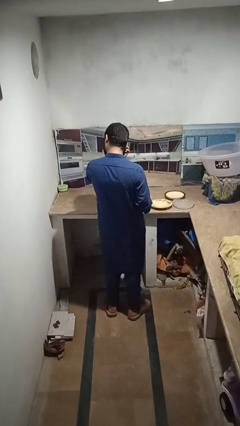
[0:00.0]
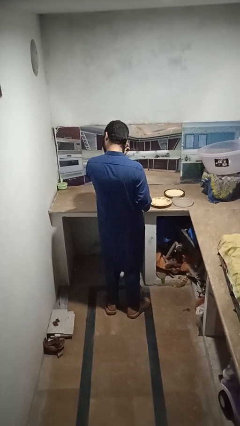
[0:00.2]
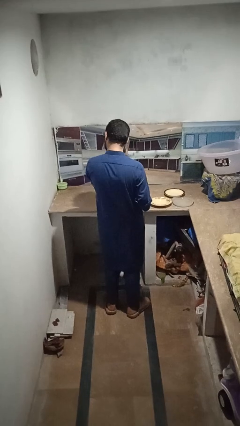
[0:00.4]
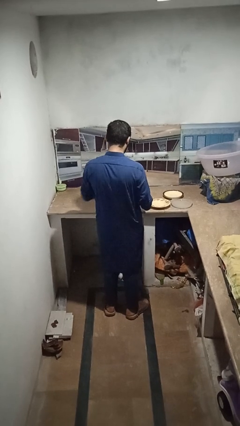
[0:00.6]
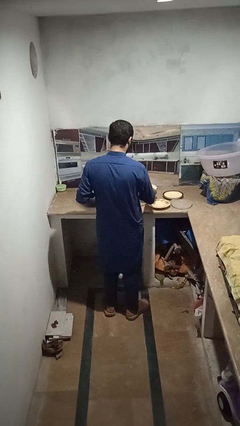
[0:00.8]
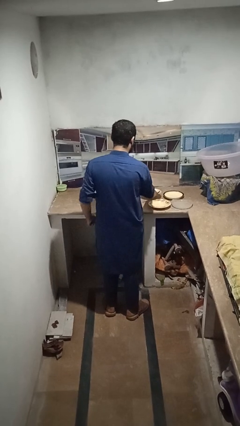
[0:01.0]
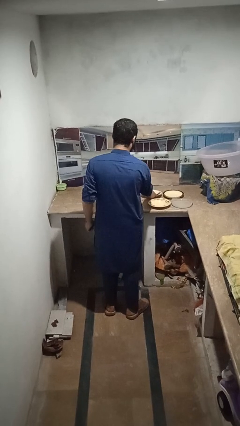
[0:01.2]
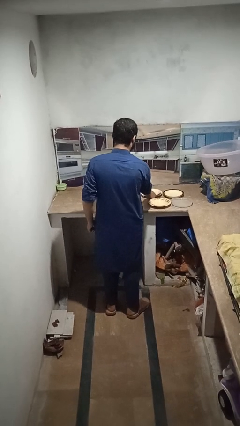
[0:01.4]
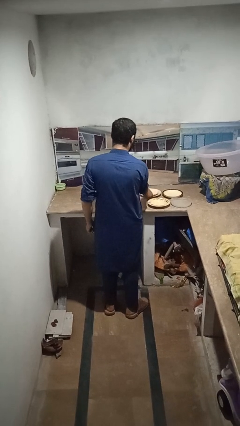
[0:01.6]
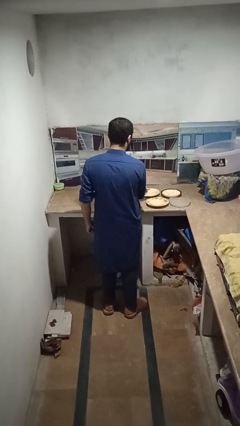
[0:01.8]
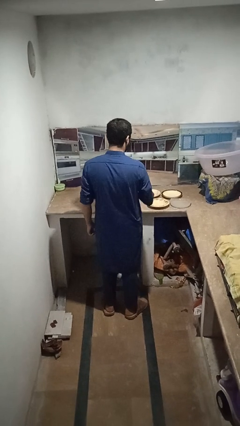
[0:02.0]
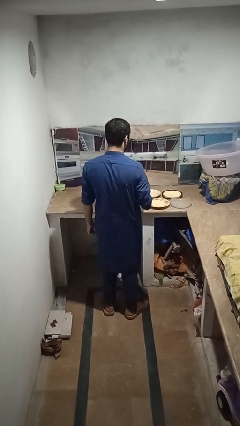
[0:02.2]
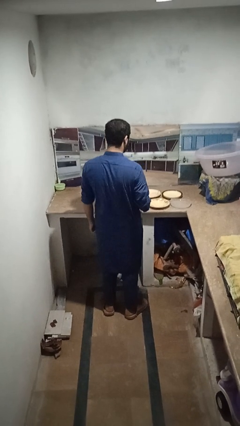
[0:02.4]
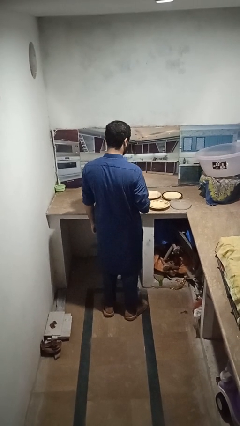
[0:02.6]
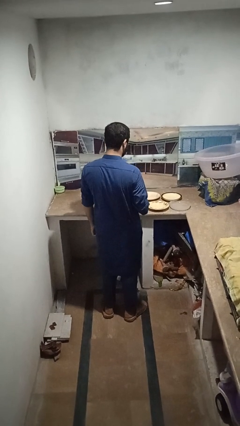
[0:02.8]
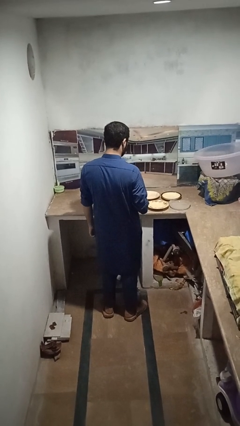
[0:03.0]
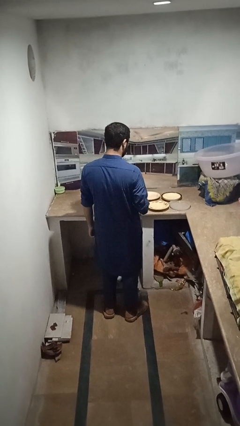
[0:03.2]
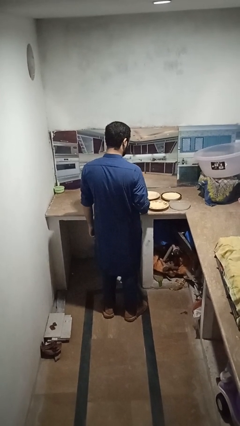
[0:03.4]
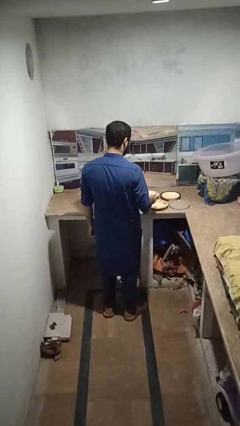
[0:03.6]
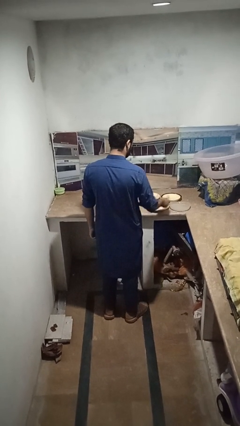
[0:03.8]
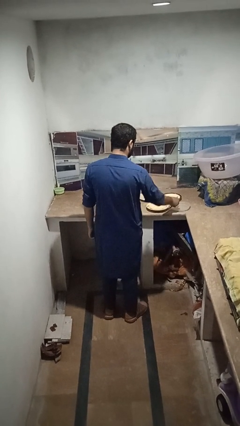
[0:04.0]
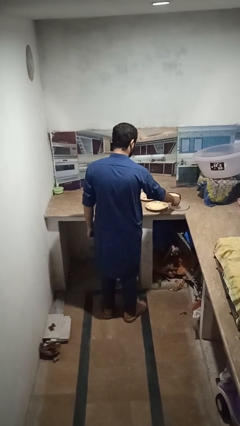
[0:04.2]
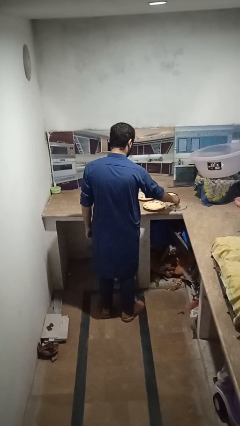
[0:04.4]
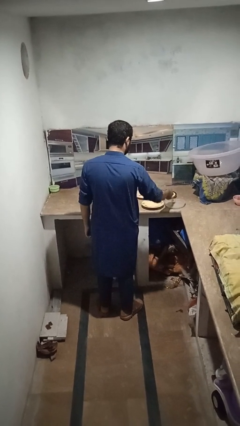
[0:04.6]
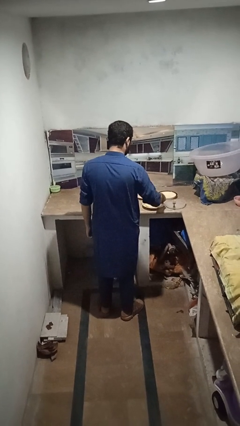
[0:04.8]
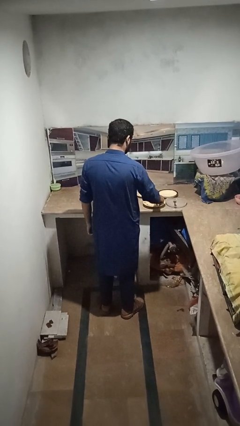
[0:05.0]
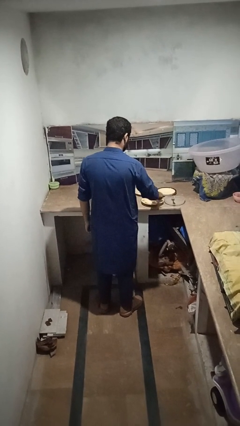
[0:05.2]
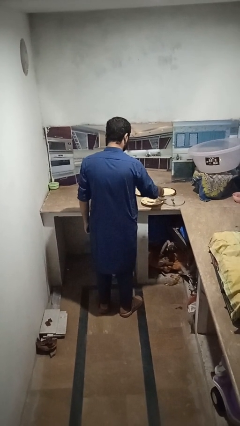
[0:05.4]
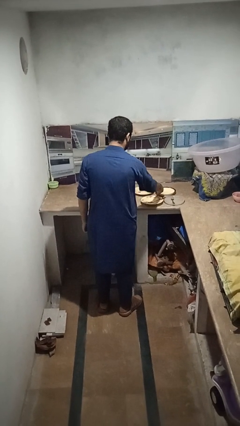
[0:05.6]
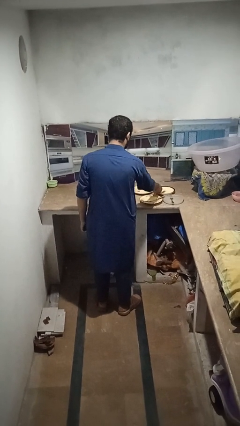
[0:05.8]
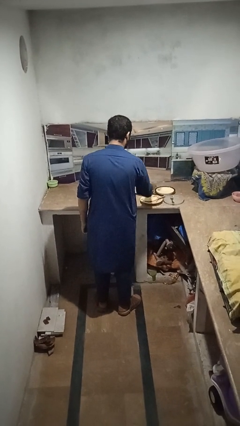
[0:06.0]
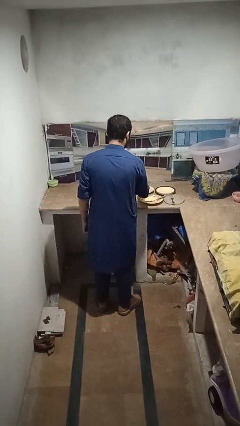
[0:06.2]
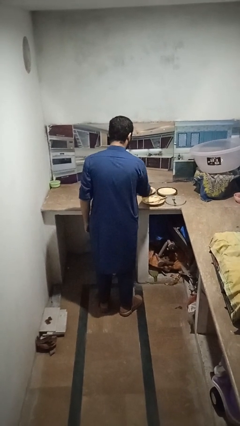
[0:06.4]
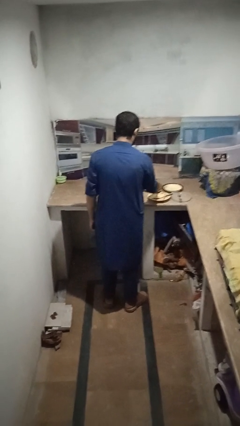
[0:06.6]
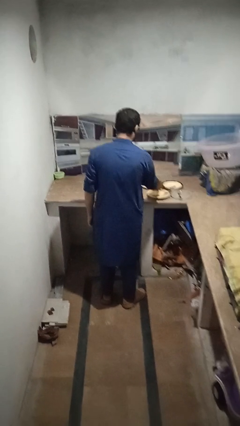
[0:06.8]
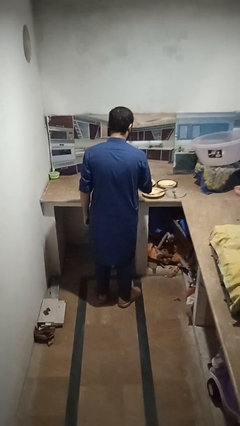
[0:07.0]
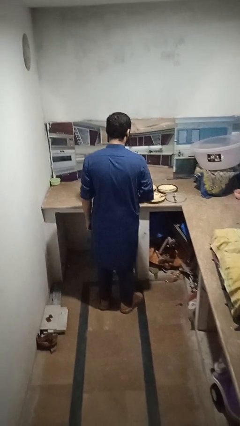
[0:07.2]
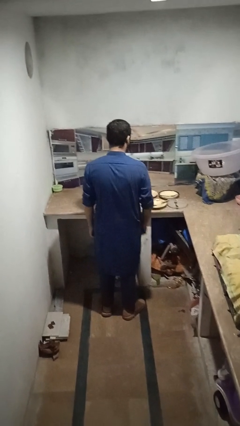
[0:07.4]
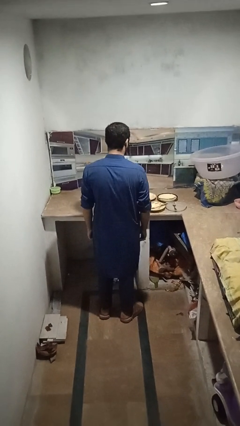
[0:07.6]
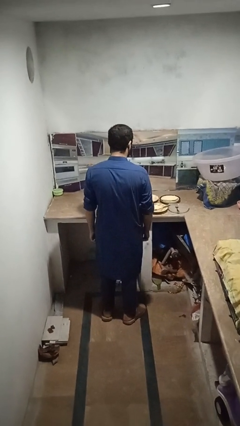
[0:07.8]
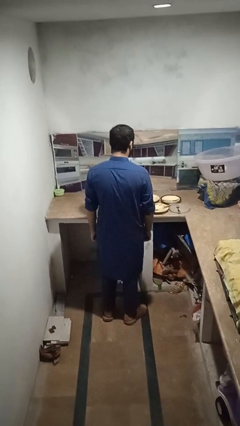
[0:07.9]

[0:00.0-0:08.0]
person sets table

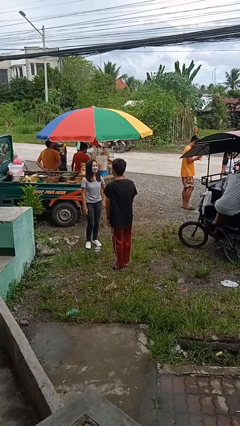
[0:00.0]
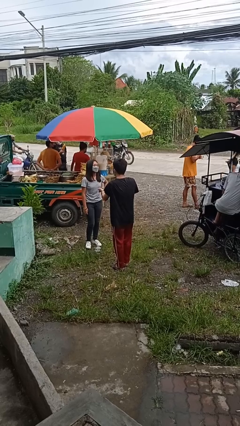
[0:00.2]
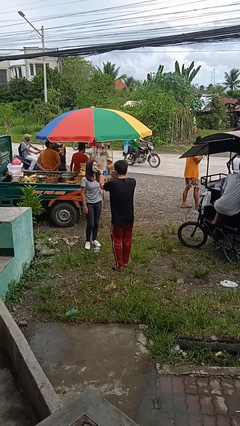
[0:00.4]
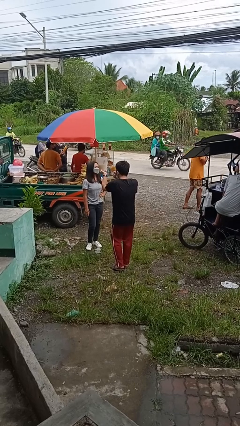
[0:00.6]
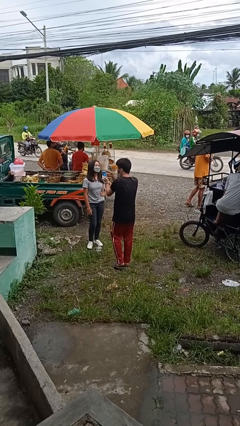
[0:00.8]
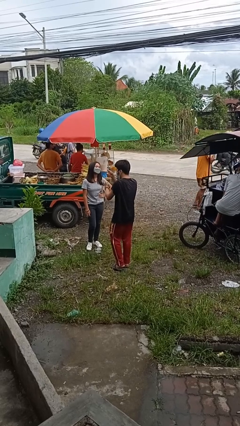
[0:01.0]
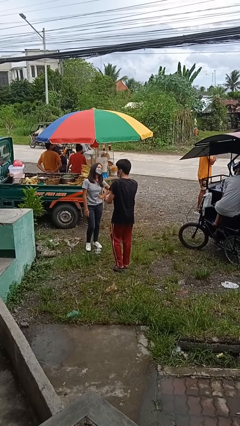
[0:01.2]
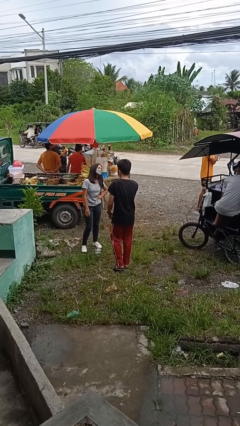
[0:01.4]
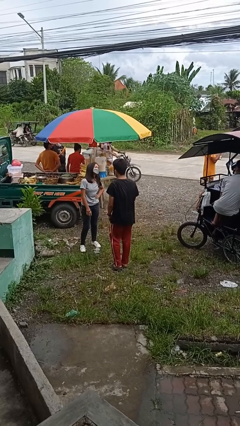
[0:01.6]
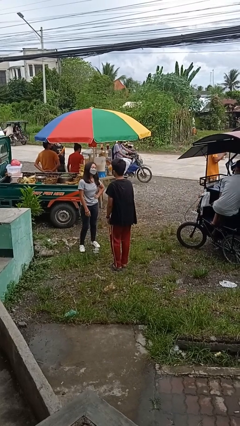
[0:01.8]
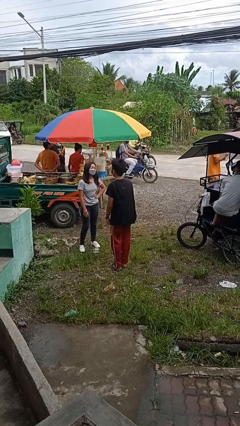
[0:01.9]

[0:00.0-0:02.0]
person talks to person

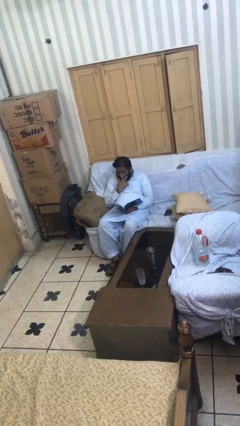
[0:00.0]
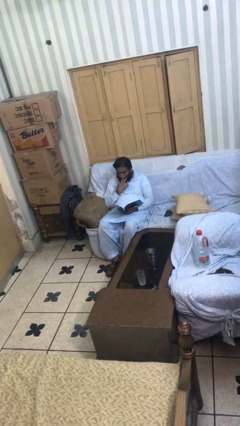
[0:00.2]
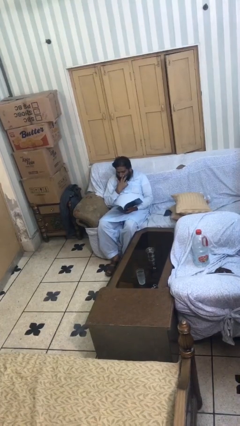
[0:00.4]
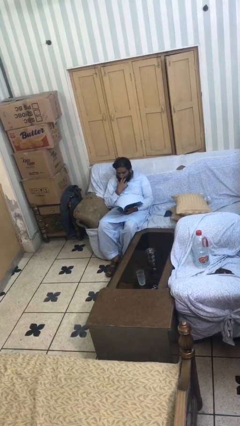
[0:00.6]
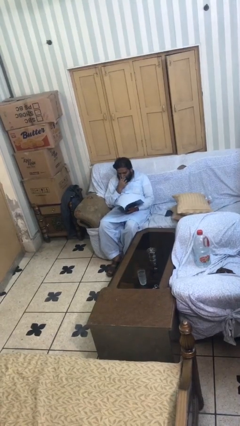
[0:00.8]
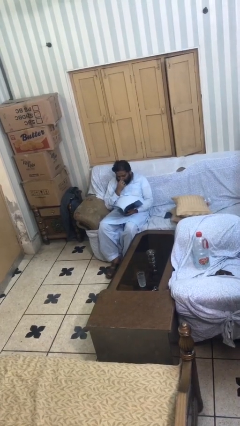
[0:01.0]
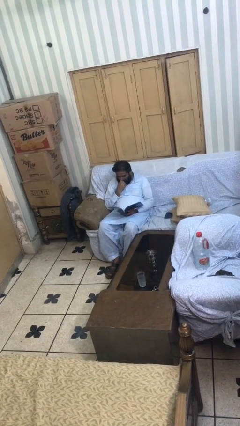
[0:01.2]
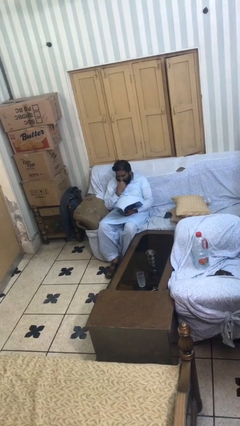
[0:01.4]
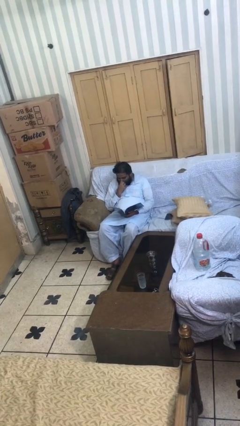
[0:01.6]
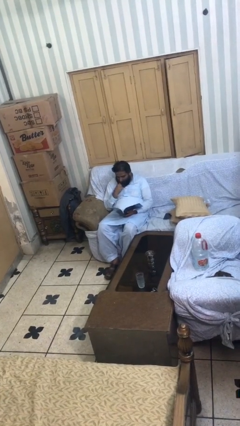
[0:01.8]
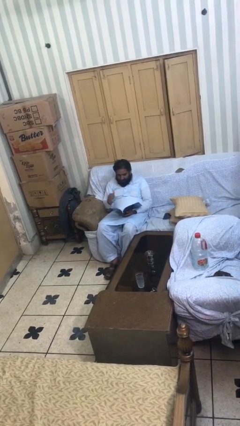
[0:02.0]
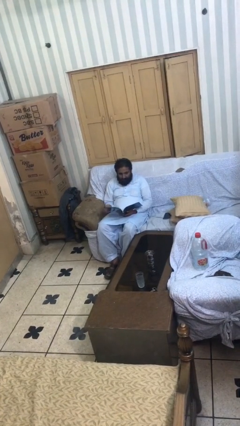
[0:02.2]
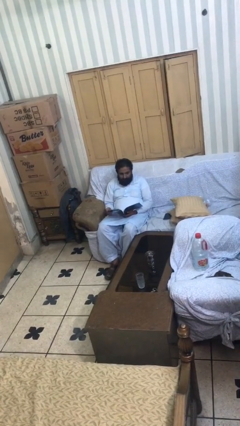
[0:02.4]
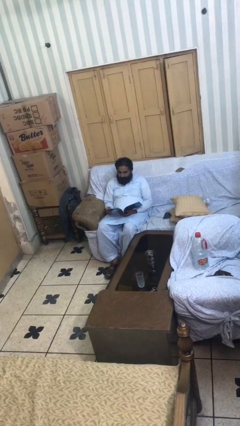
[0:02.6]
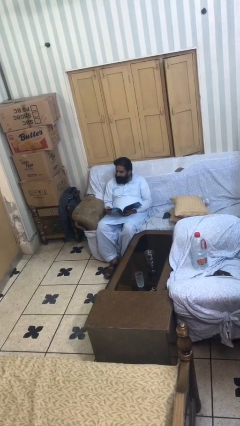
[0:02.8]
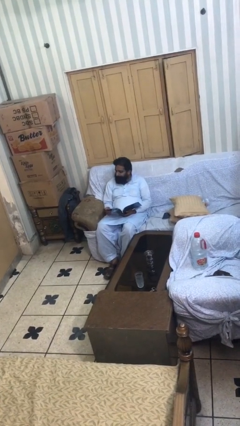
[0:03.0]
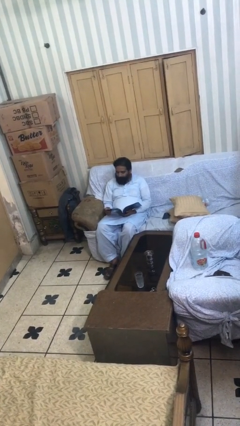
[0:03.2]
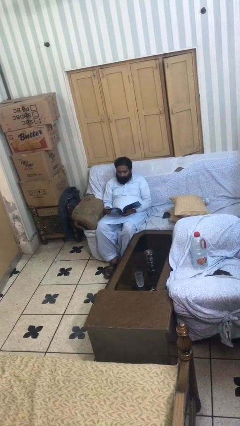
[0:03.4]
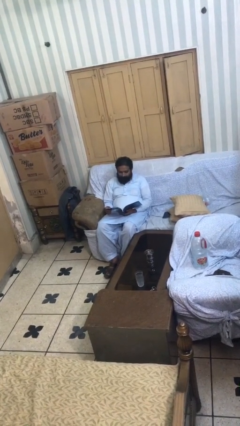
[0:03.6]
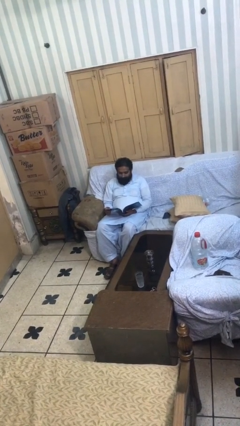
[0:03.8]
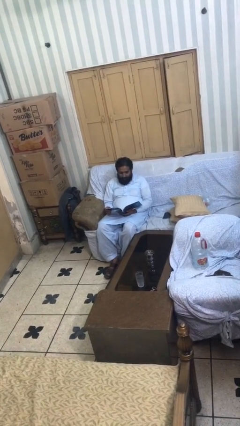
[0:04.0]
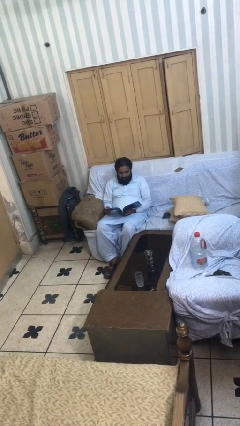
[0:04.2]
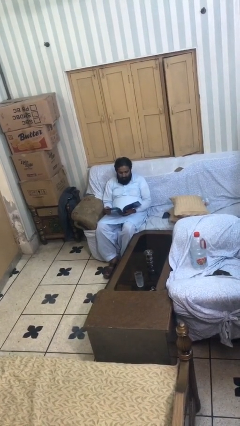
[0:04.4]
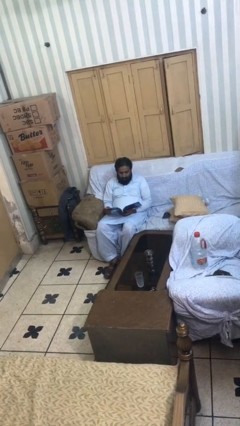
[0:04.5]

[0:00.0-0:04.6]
person reads document

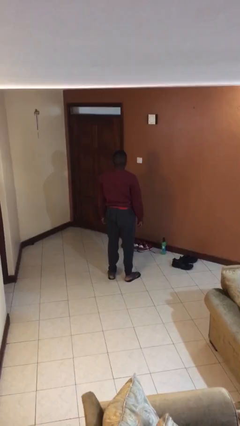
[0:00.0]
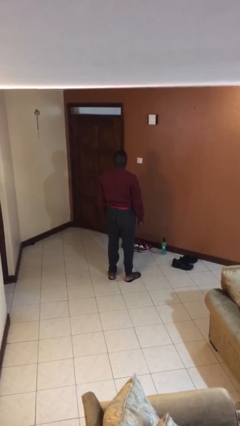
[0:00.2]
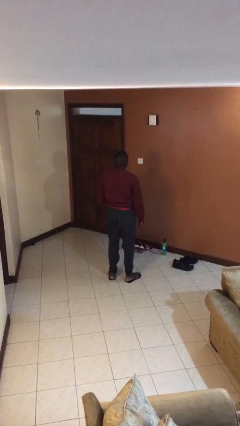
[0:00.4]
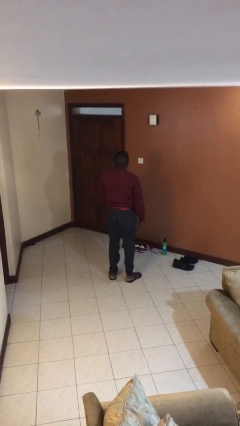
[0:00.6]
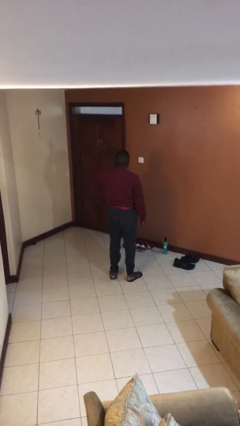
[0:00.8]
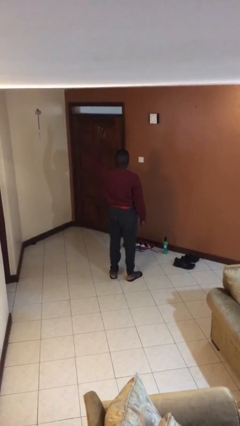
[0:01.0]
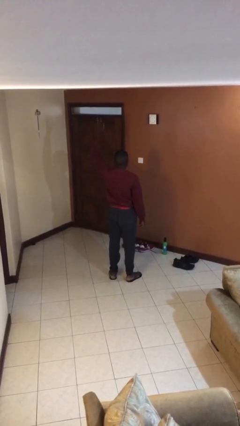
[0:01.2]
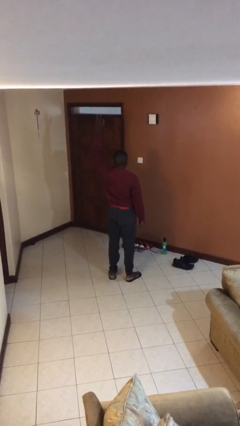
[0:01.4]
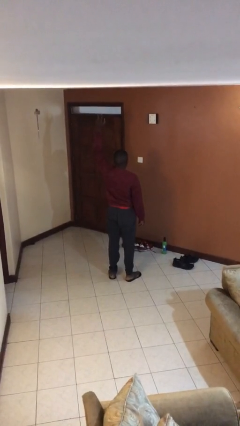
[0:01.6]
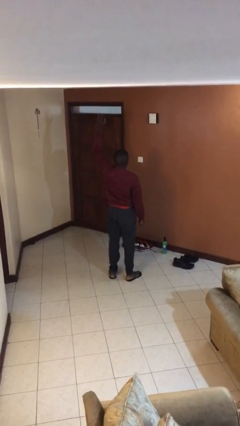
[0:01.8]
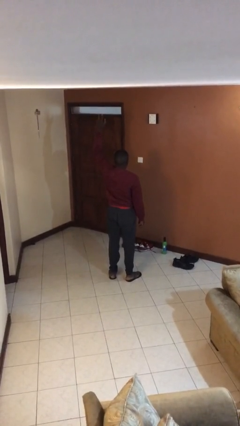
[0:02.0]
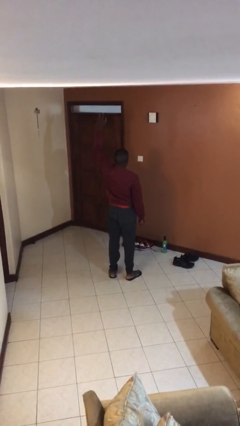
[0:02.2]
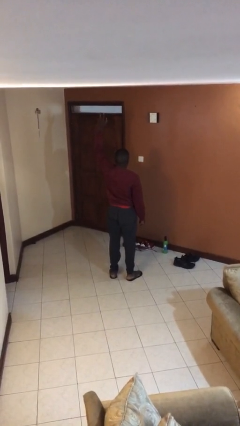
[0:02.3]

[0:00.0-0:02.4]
person gestures raise hand

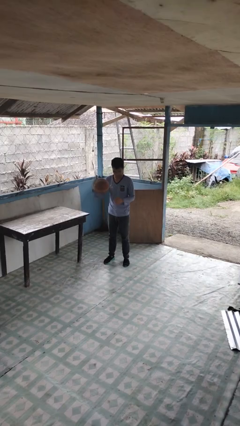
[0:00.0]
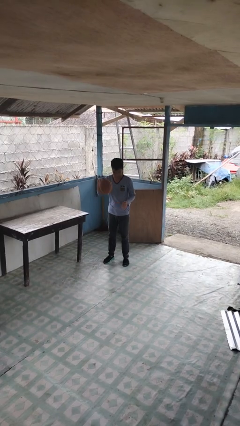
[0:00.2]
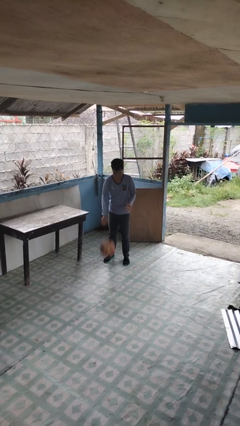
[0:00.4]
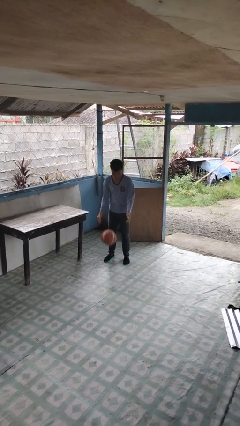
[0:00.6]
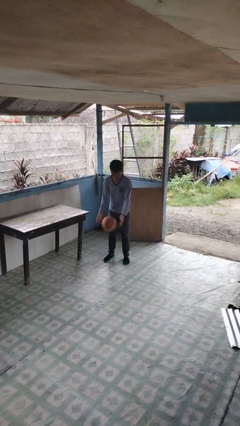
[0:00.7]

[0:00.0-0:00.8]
person bounces ball on floor
